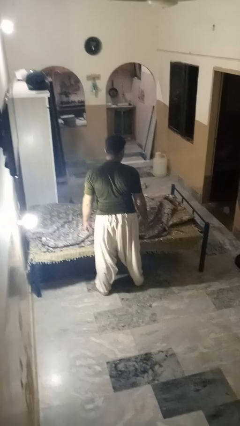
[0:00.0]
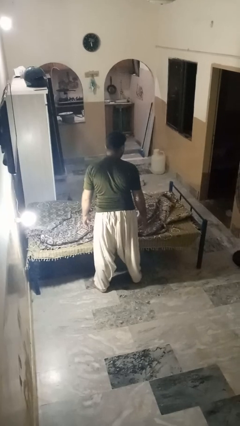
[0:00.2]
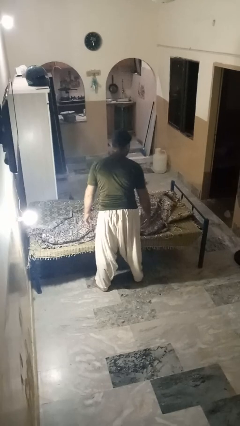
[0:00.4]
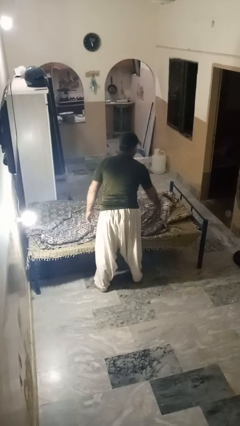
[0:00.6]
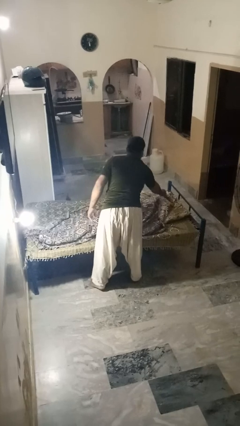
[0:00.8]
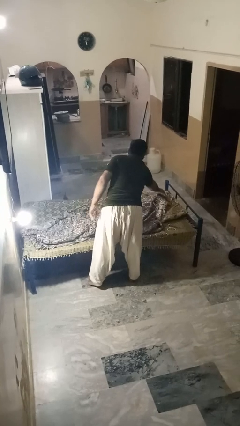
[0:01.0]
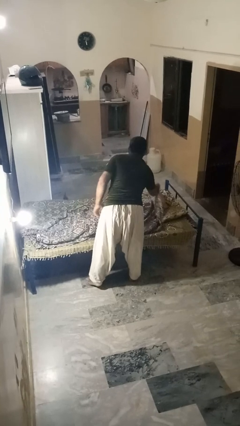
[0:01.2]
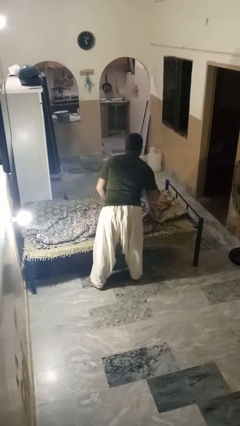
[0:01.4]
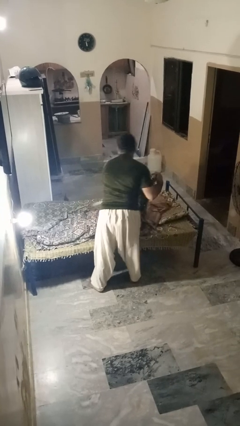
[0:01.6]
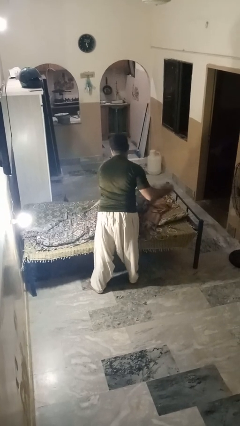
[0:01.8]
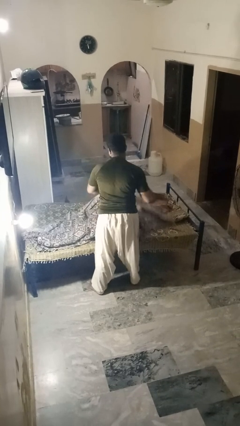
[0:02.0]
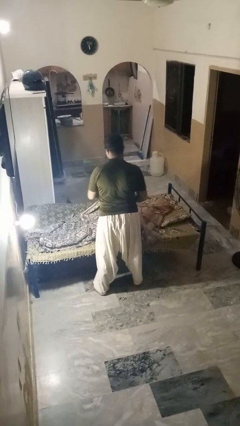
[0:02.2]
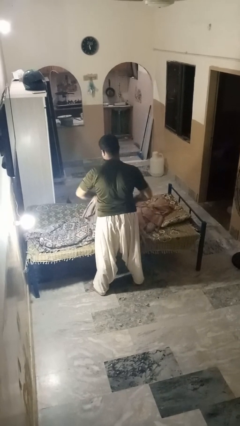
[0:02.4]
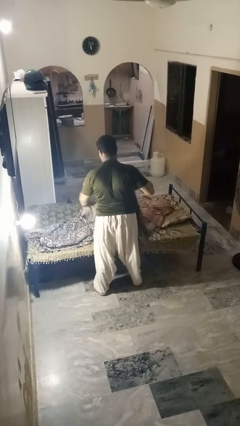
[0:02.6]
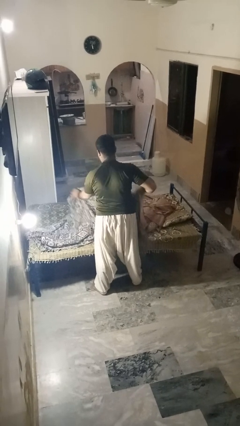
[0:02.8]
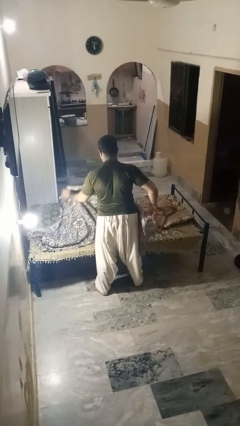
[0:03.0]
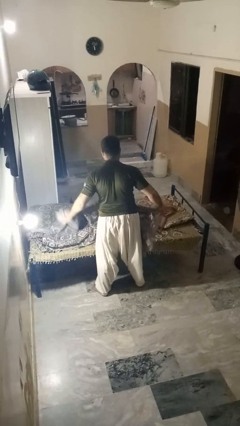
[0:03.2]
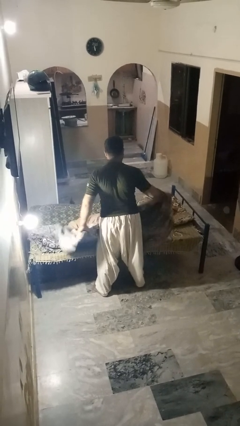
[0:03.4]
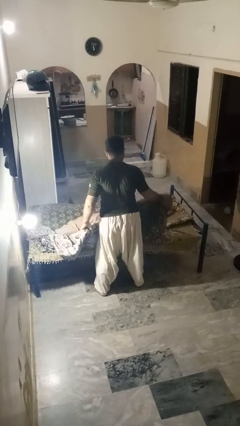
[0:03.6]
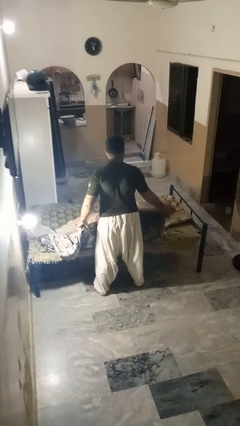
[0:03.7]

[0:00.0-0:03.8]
person uncovers friend with blanket

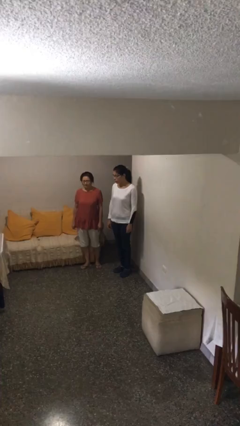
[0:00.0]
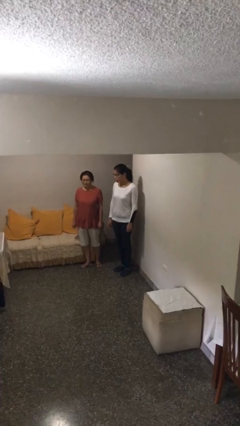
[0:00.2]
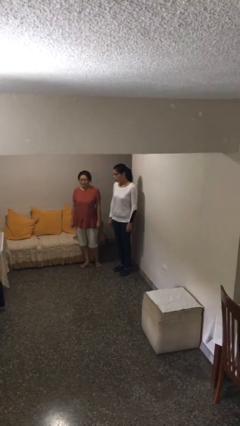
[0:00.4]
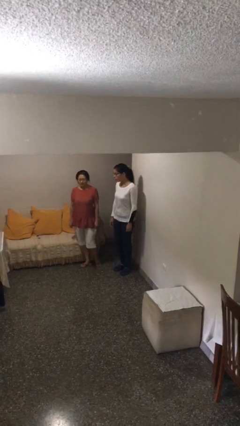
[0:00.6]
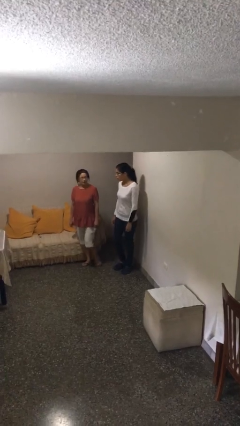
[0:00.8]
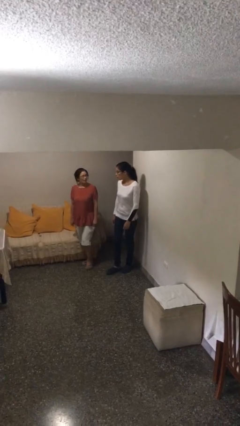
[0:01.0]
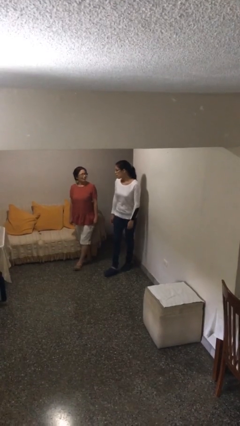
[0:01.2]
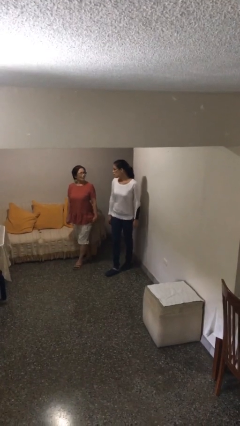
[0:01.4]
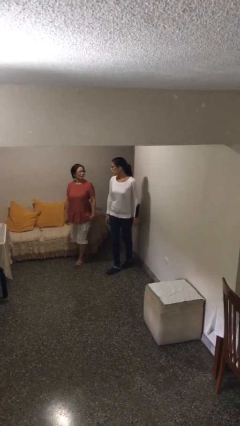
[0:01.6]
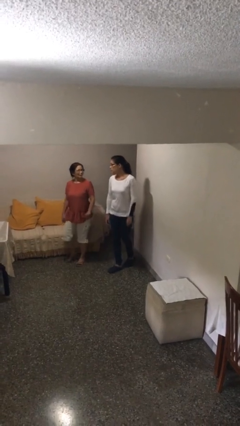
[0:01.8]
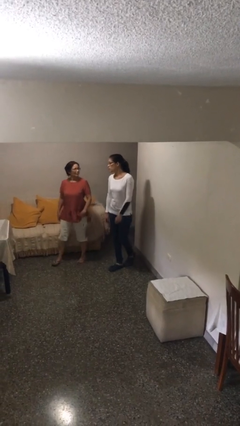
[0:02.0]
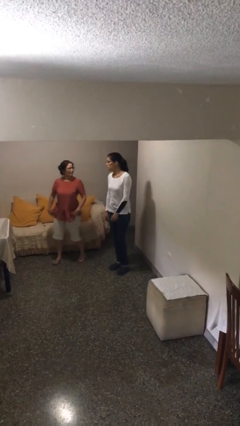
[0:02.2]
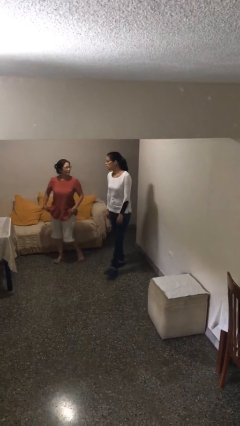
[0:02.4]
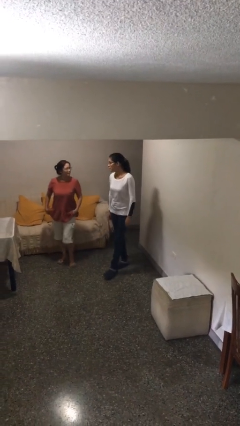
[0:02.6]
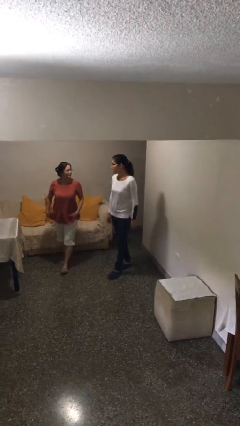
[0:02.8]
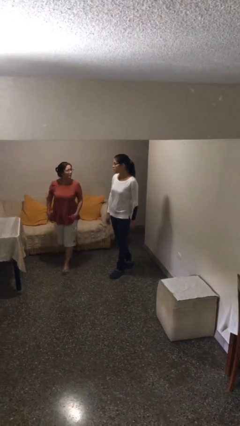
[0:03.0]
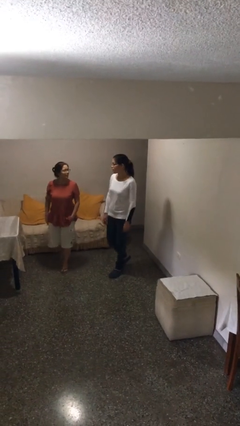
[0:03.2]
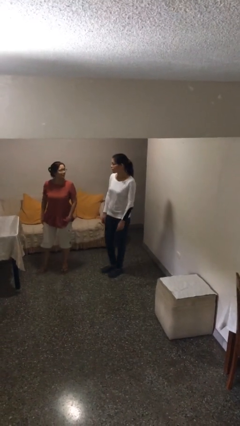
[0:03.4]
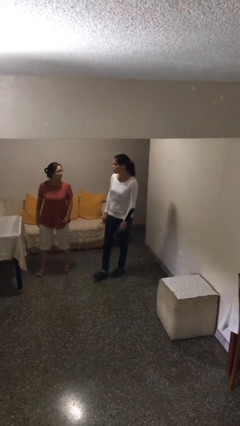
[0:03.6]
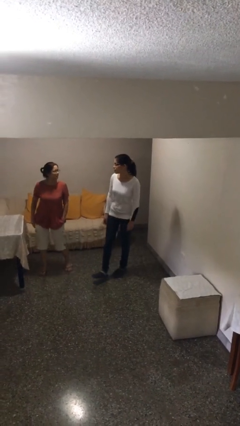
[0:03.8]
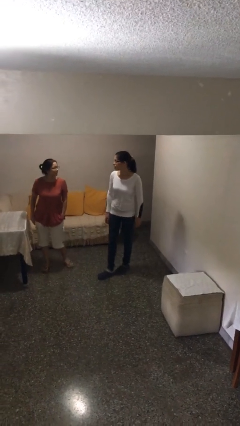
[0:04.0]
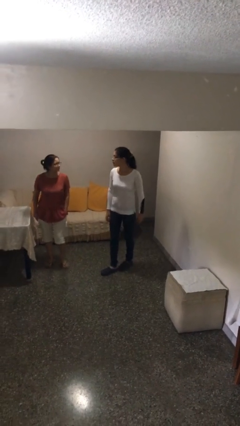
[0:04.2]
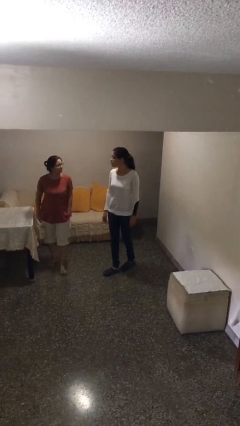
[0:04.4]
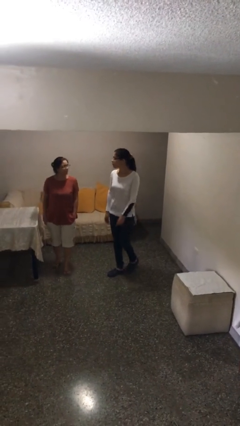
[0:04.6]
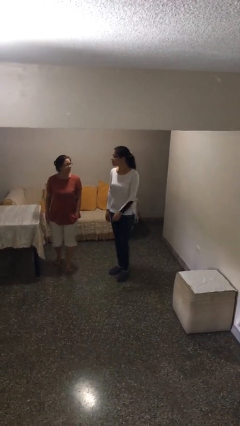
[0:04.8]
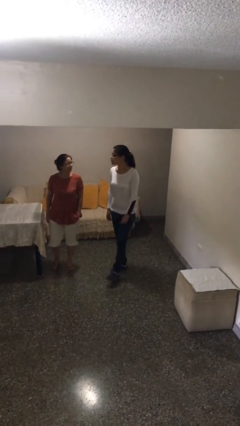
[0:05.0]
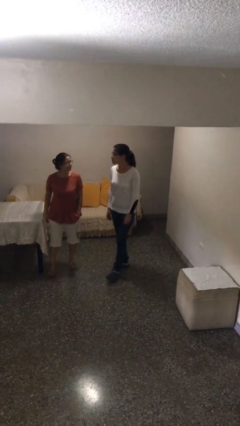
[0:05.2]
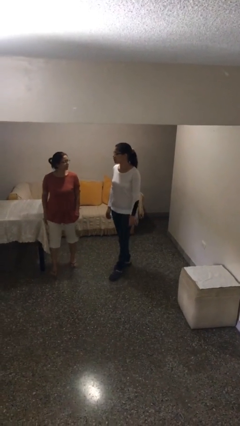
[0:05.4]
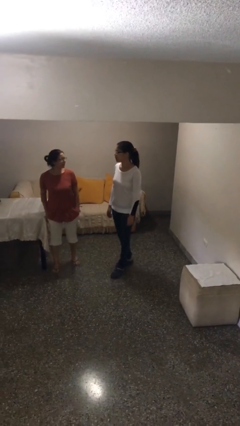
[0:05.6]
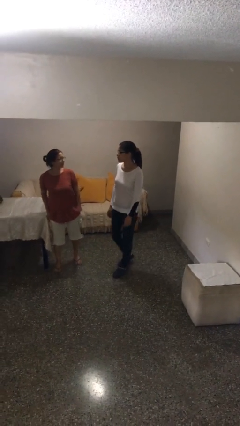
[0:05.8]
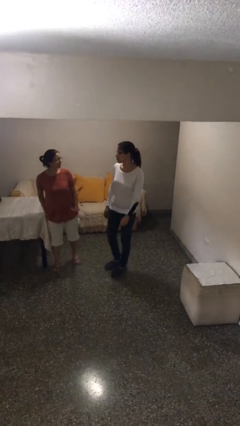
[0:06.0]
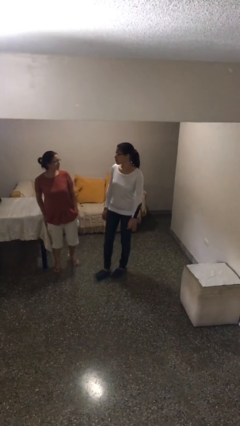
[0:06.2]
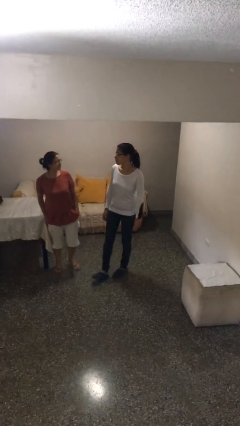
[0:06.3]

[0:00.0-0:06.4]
person talks to person

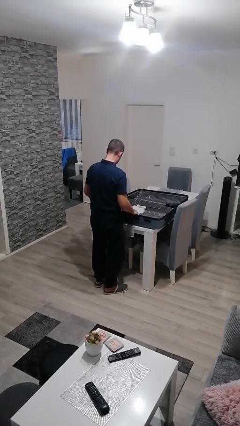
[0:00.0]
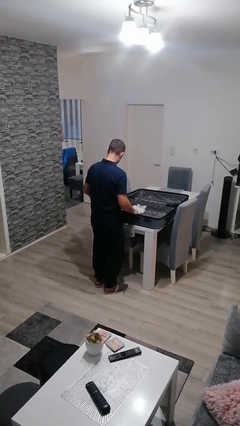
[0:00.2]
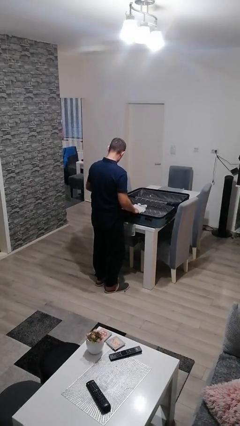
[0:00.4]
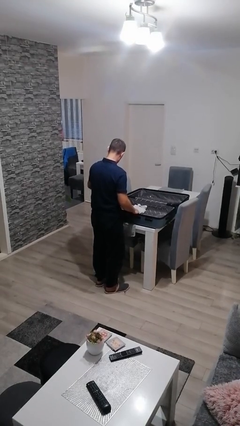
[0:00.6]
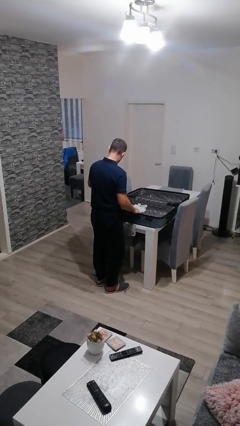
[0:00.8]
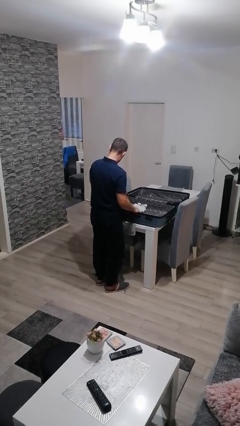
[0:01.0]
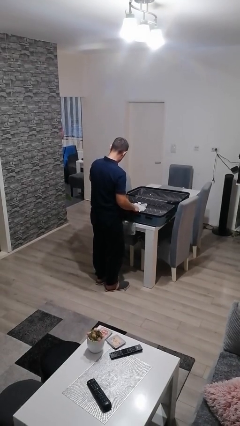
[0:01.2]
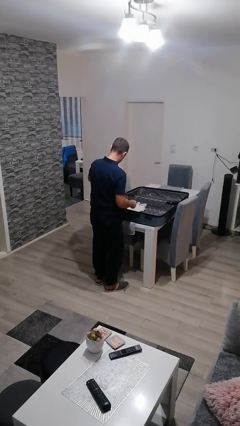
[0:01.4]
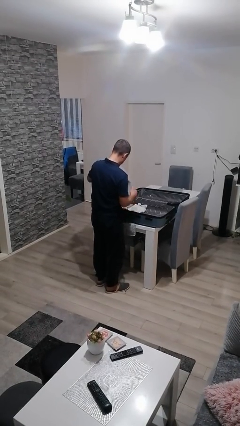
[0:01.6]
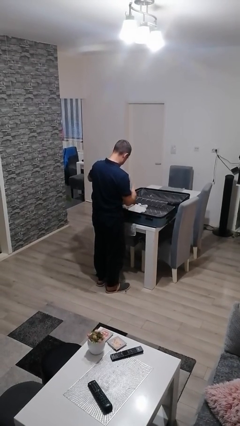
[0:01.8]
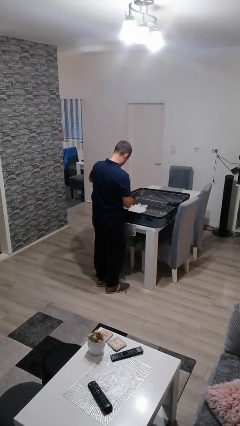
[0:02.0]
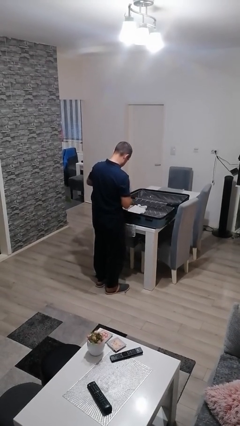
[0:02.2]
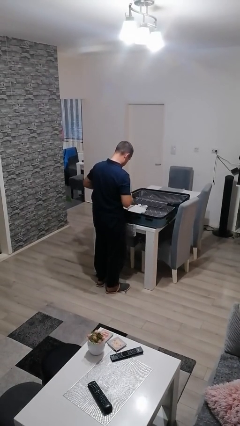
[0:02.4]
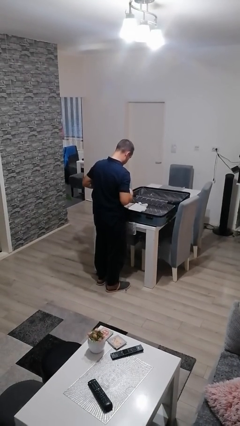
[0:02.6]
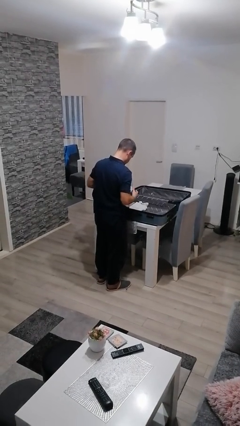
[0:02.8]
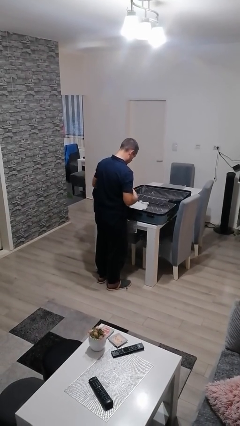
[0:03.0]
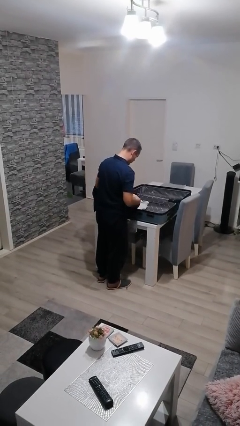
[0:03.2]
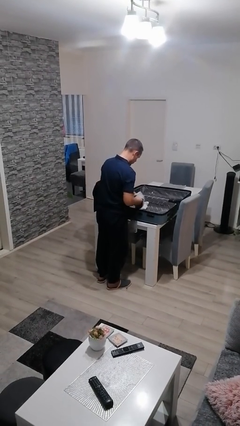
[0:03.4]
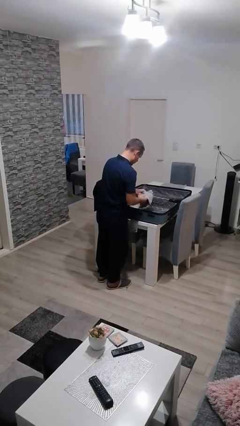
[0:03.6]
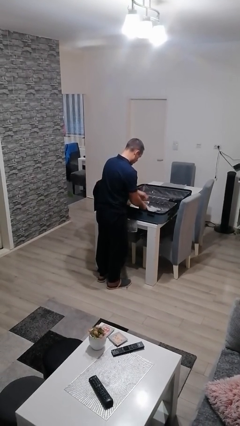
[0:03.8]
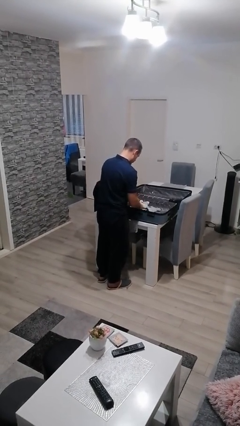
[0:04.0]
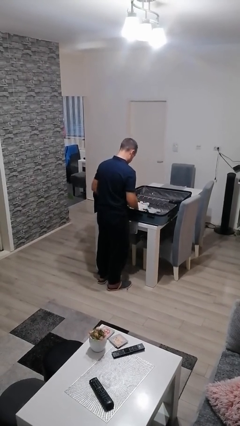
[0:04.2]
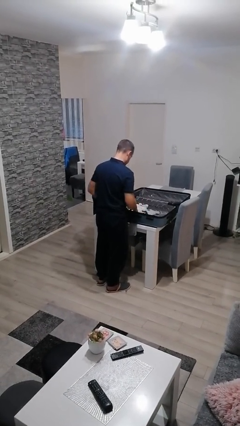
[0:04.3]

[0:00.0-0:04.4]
person loads clothes into suitcase

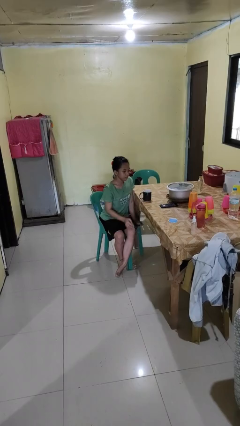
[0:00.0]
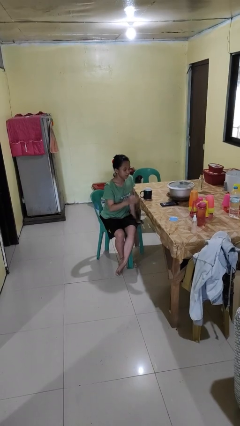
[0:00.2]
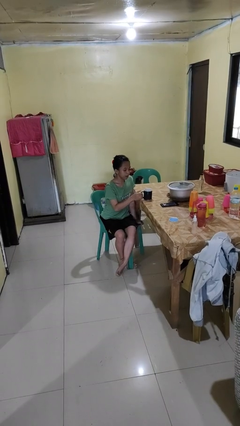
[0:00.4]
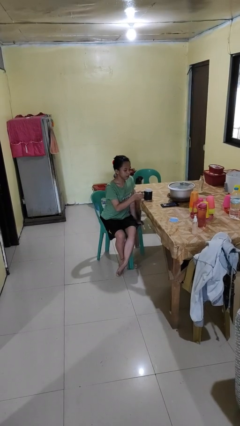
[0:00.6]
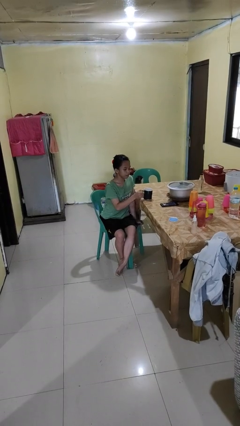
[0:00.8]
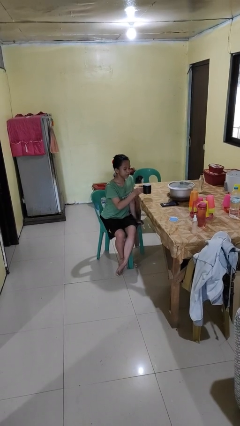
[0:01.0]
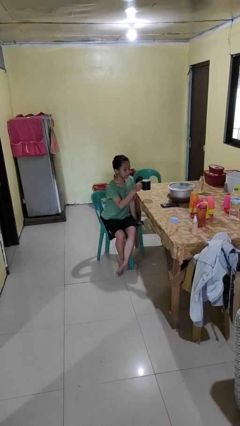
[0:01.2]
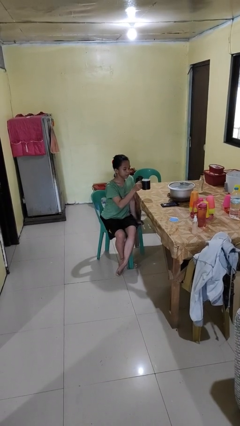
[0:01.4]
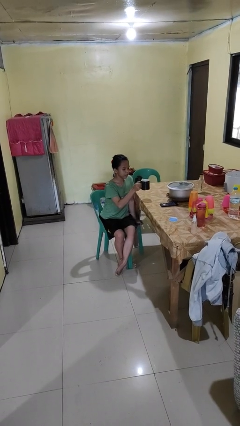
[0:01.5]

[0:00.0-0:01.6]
person picks up object from table

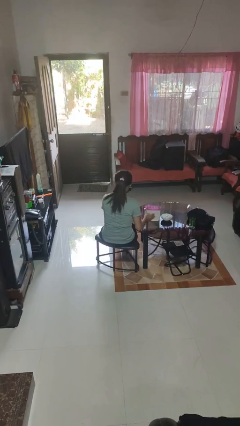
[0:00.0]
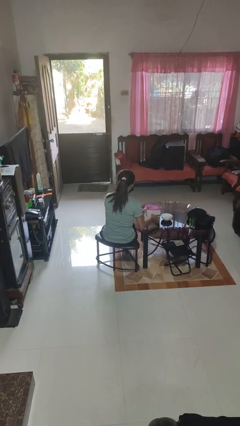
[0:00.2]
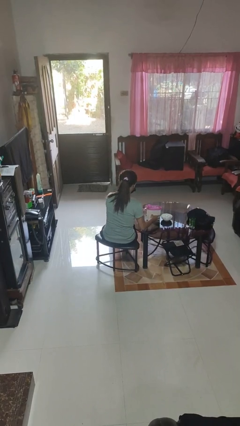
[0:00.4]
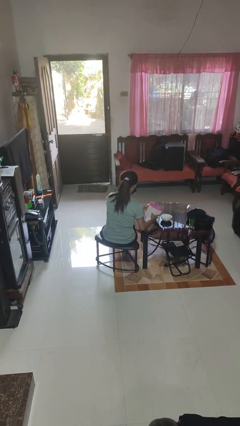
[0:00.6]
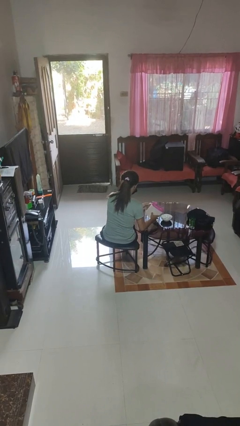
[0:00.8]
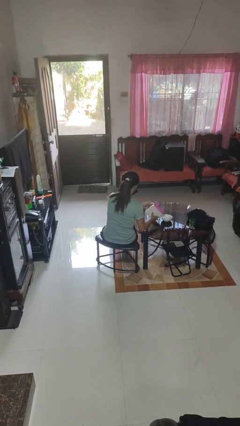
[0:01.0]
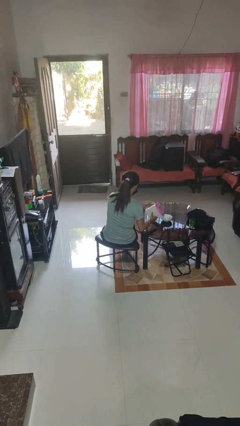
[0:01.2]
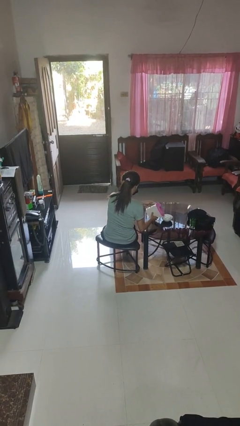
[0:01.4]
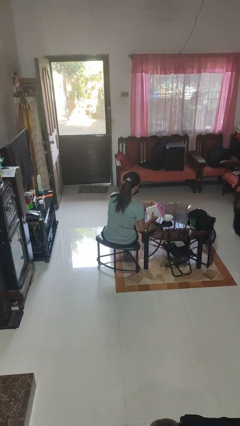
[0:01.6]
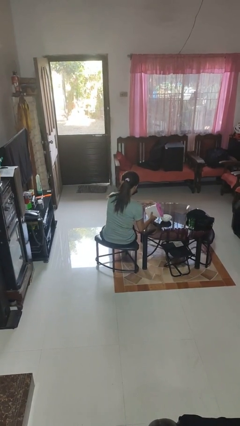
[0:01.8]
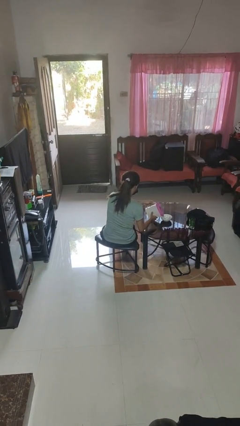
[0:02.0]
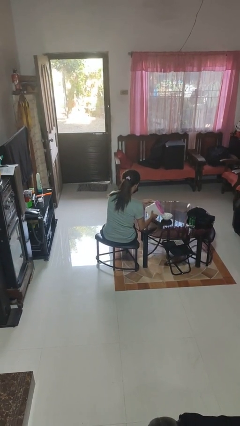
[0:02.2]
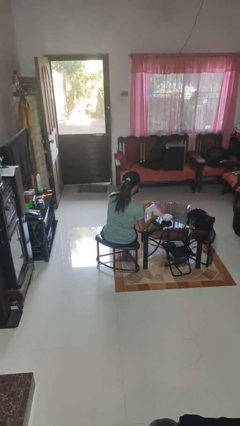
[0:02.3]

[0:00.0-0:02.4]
person pours into bowl
